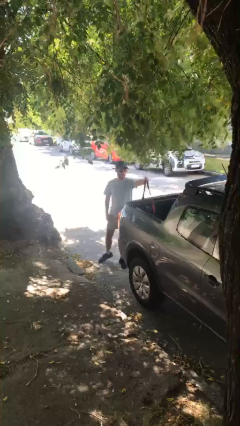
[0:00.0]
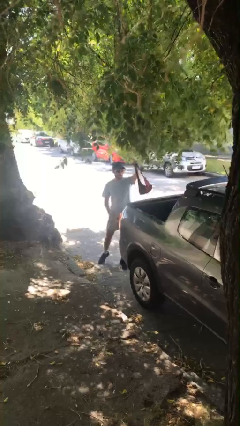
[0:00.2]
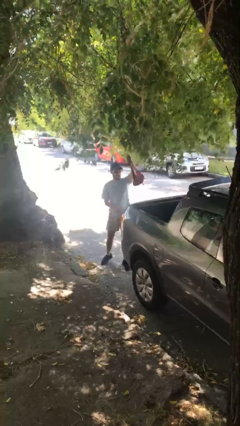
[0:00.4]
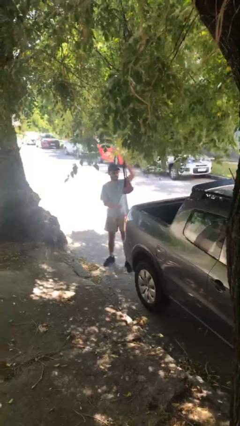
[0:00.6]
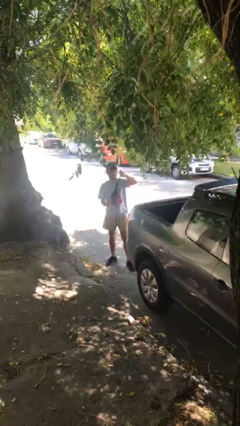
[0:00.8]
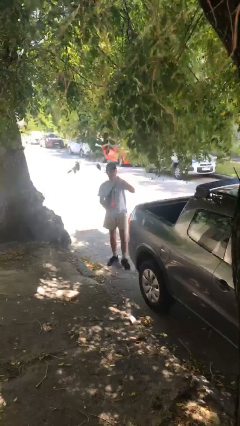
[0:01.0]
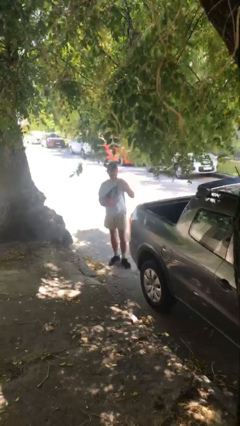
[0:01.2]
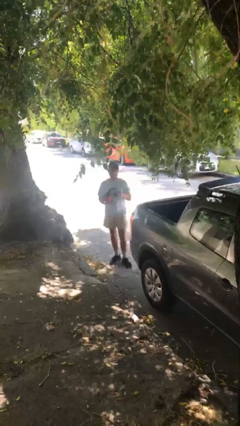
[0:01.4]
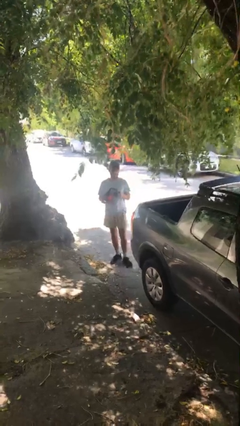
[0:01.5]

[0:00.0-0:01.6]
person unloads car

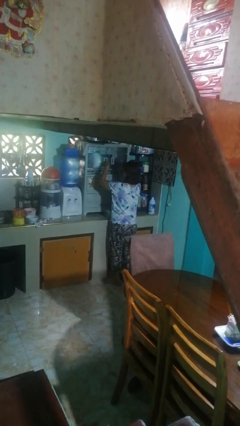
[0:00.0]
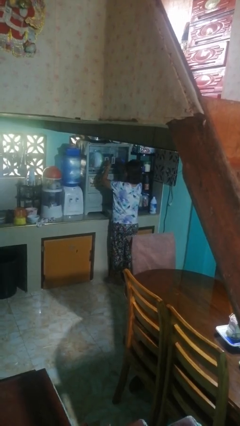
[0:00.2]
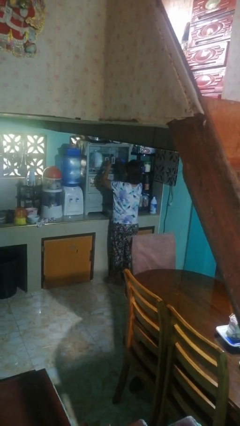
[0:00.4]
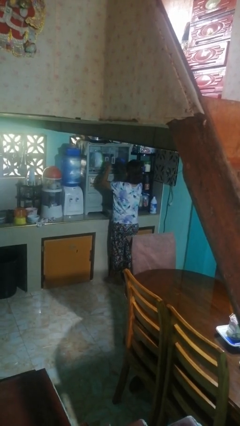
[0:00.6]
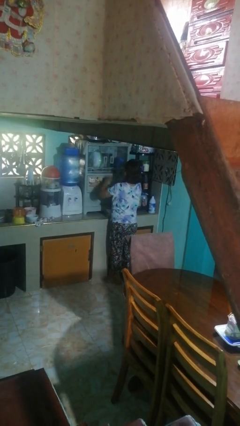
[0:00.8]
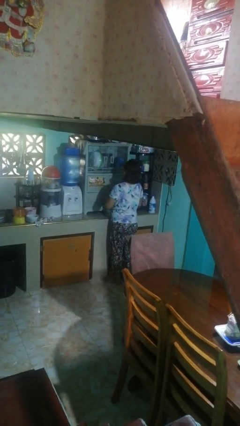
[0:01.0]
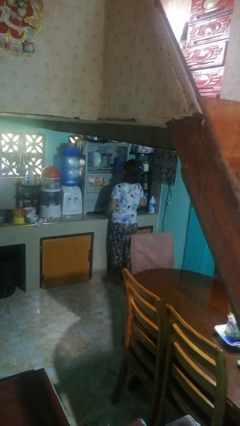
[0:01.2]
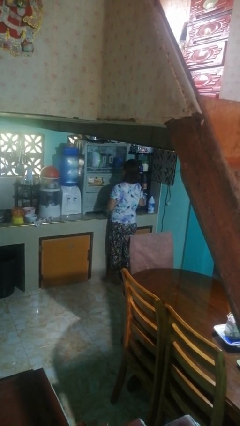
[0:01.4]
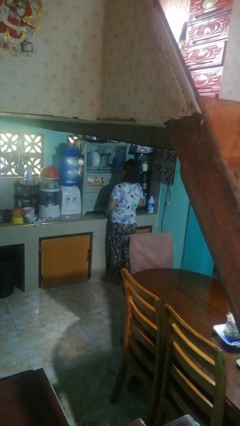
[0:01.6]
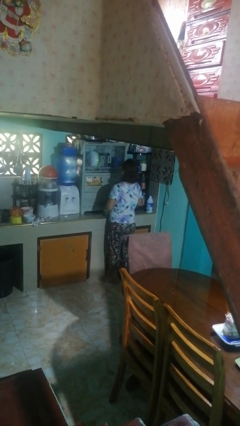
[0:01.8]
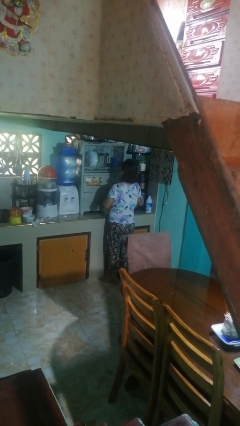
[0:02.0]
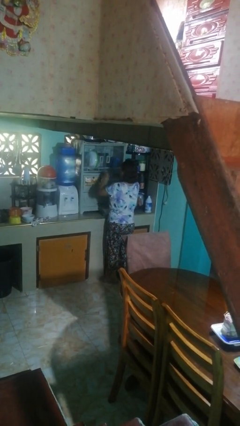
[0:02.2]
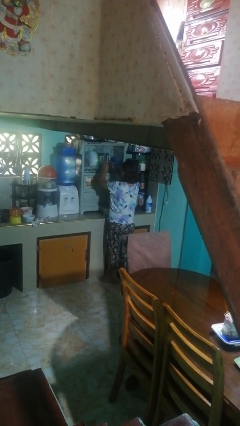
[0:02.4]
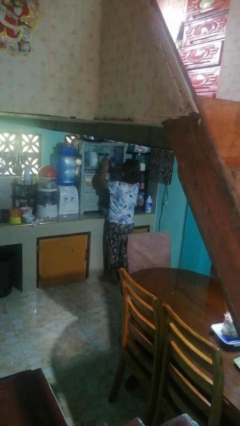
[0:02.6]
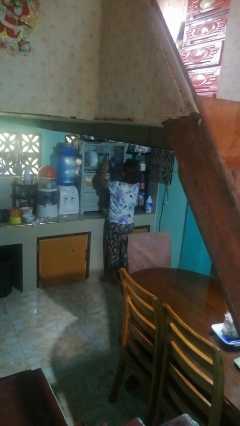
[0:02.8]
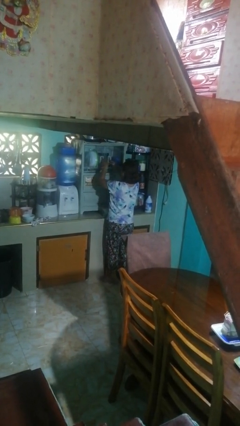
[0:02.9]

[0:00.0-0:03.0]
person opens curtains

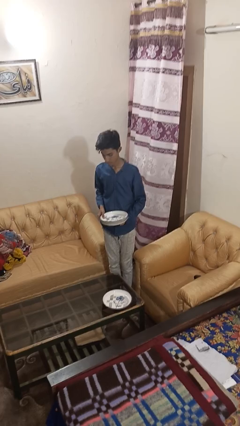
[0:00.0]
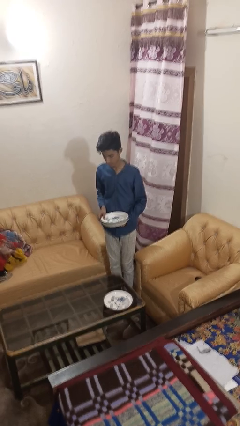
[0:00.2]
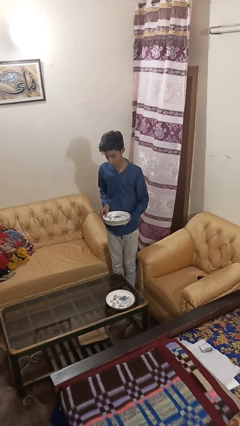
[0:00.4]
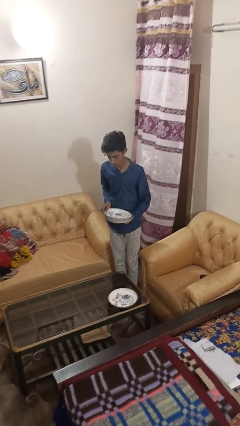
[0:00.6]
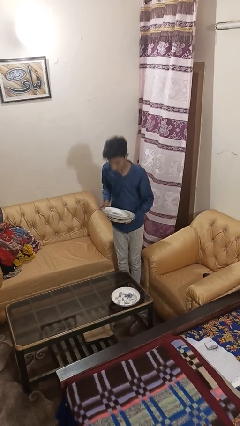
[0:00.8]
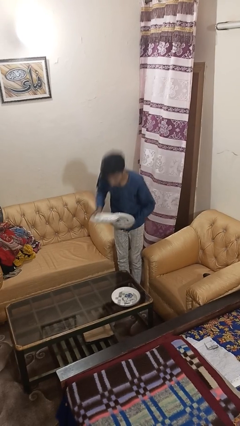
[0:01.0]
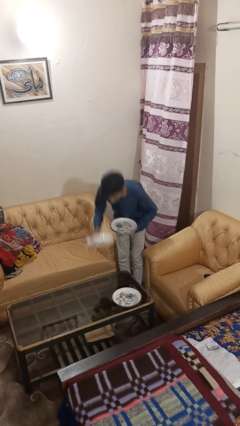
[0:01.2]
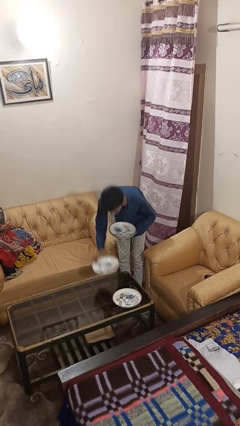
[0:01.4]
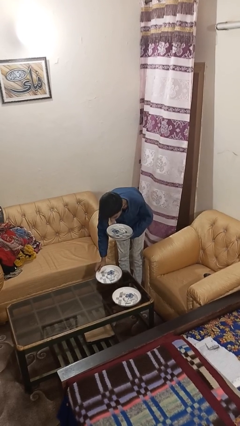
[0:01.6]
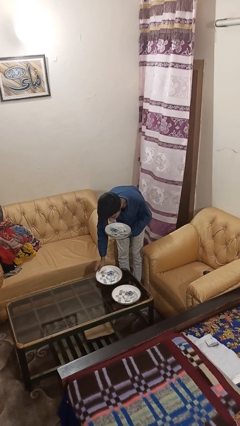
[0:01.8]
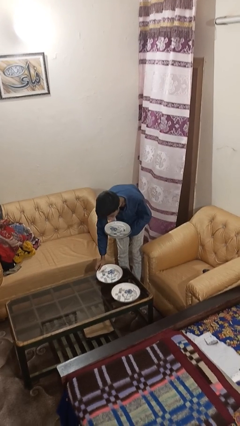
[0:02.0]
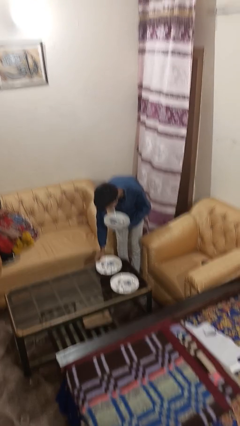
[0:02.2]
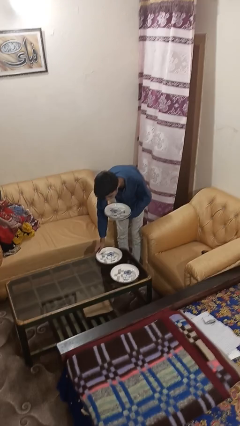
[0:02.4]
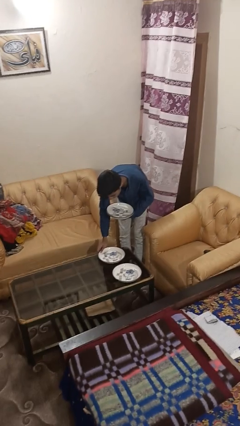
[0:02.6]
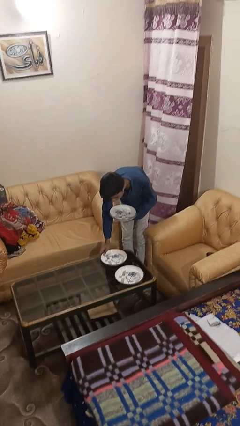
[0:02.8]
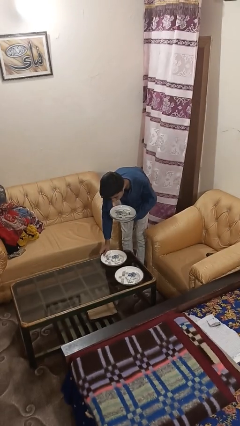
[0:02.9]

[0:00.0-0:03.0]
person sets table

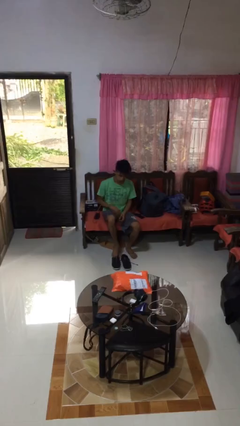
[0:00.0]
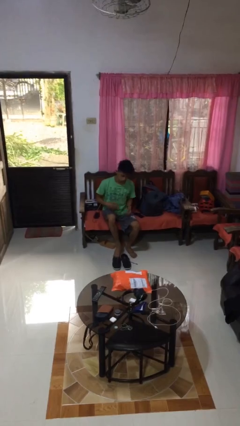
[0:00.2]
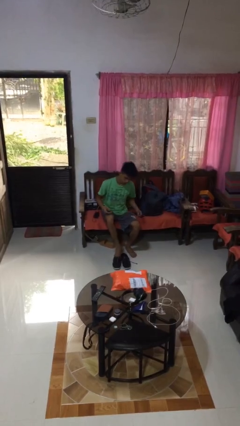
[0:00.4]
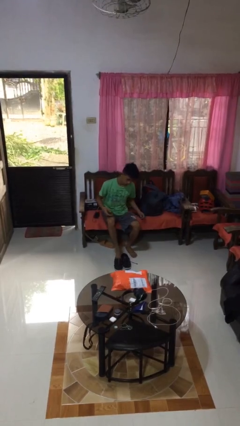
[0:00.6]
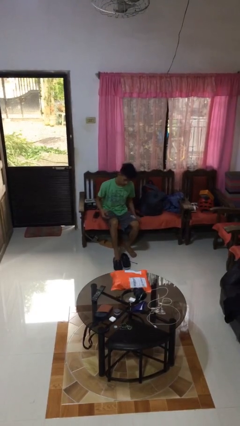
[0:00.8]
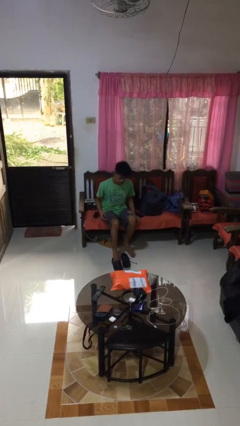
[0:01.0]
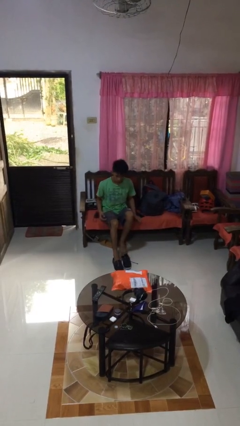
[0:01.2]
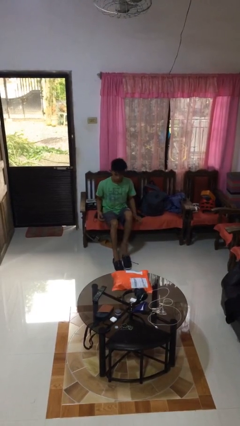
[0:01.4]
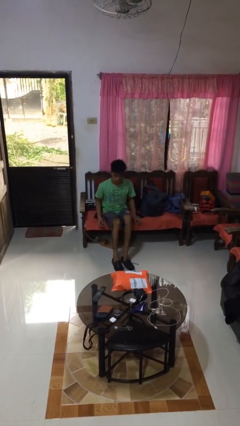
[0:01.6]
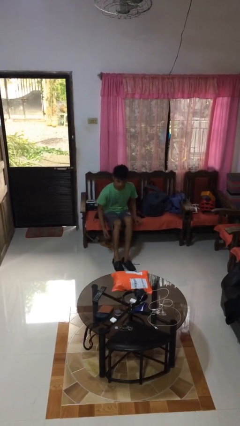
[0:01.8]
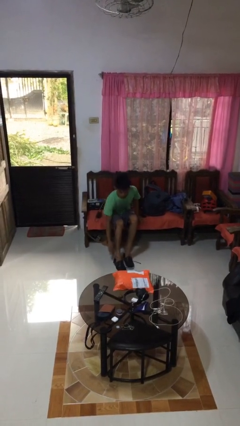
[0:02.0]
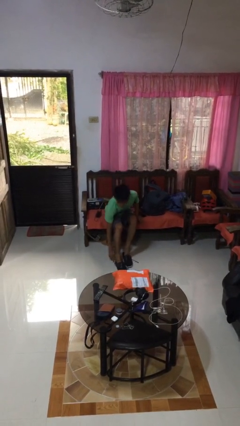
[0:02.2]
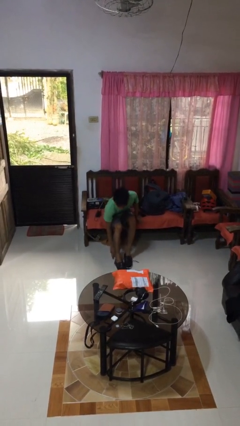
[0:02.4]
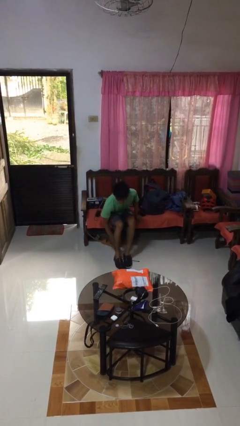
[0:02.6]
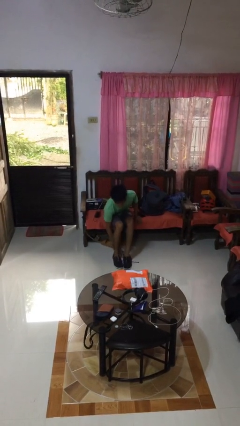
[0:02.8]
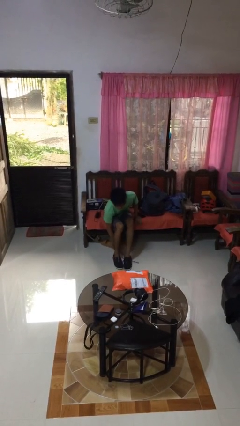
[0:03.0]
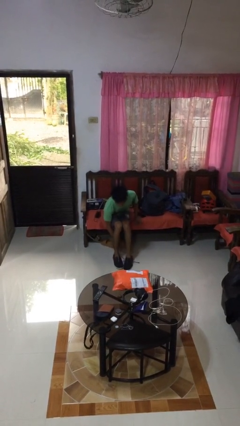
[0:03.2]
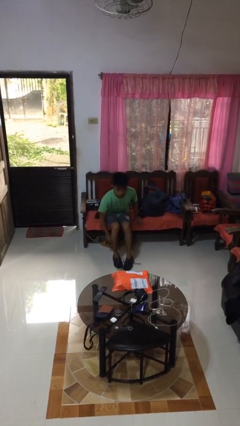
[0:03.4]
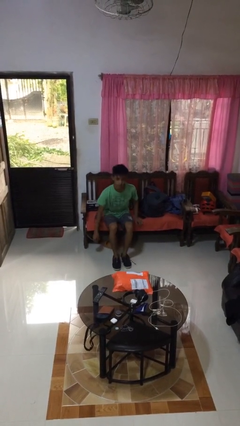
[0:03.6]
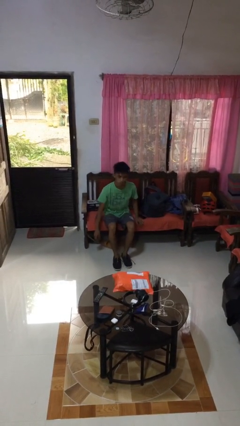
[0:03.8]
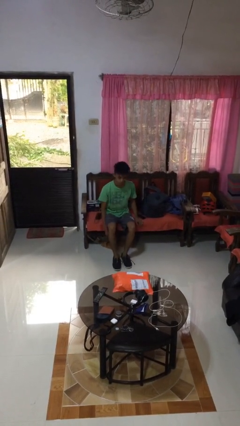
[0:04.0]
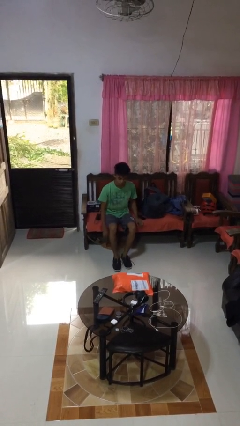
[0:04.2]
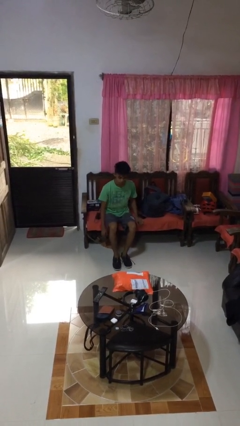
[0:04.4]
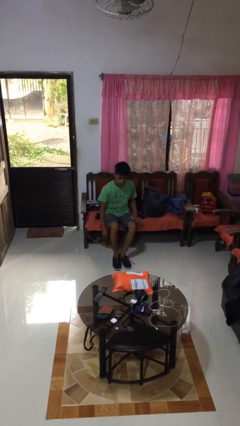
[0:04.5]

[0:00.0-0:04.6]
person puts on shoes

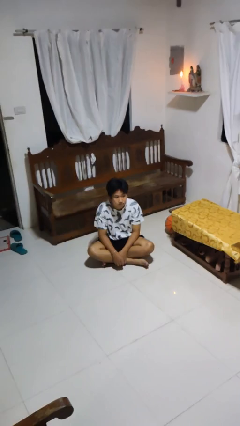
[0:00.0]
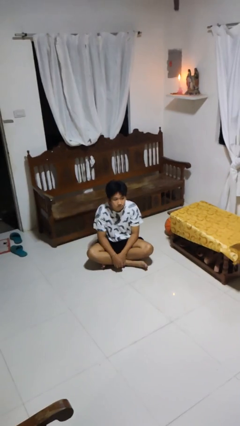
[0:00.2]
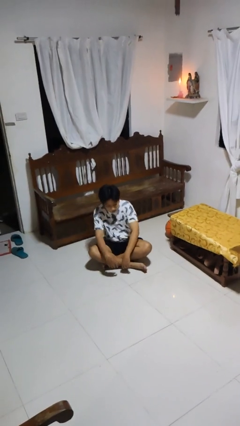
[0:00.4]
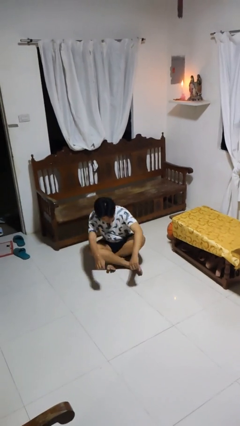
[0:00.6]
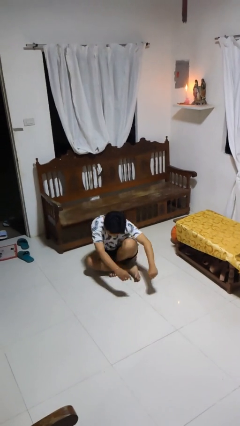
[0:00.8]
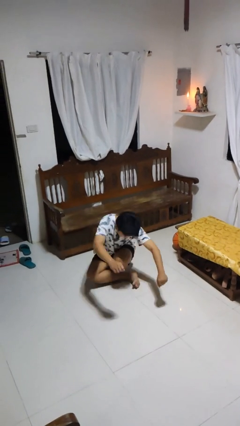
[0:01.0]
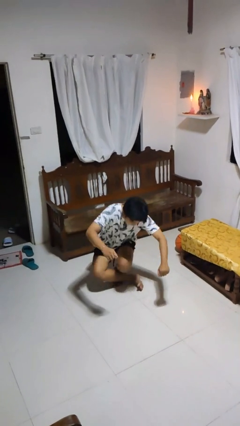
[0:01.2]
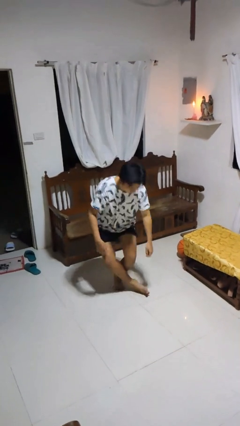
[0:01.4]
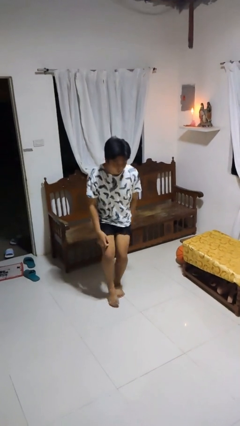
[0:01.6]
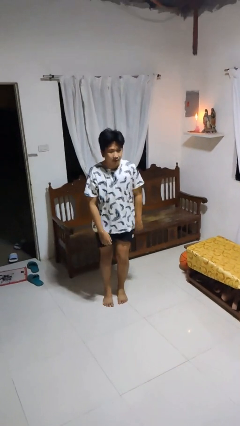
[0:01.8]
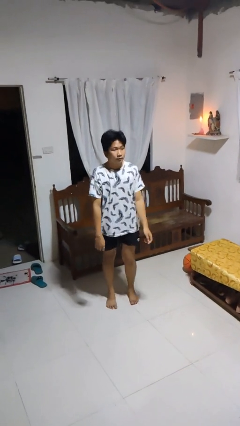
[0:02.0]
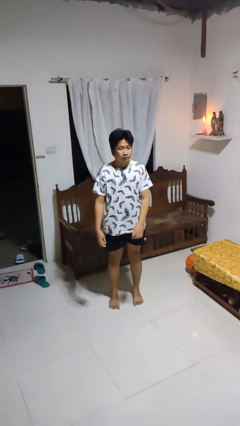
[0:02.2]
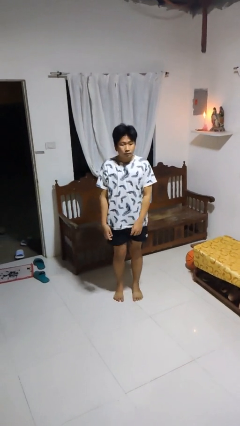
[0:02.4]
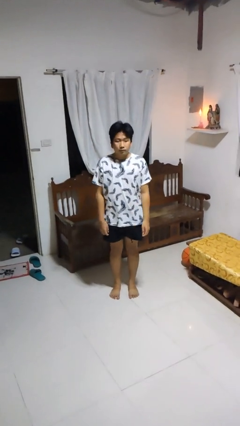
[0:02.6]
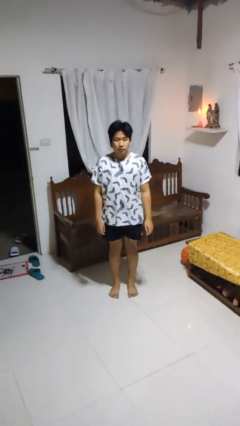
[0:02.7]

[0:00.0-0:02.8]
person stands up from floor

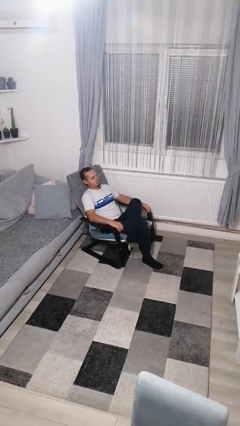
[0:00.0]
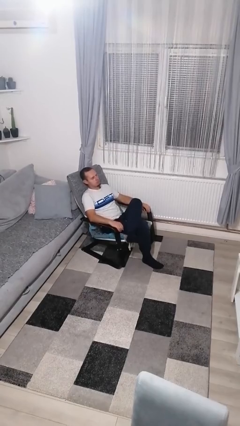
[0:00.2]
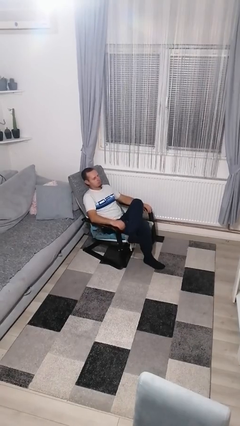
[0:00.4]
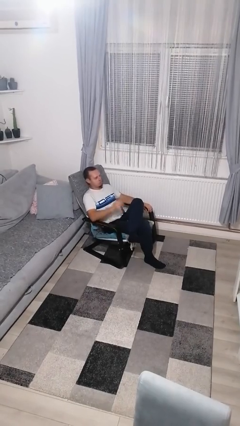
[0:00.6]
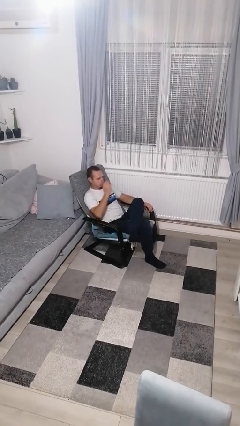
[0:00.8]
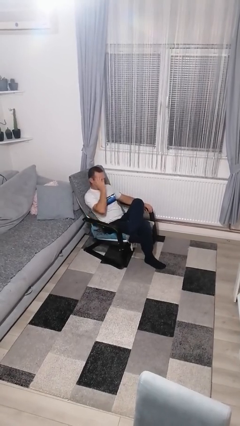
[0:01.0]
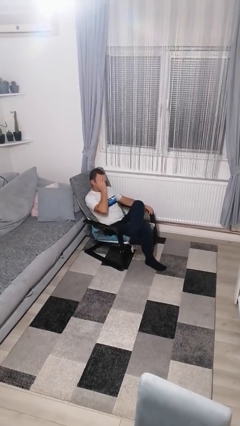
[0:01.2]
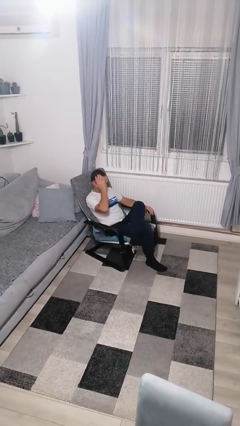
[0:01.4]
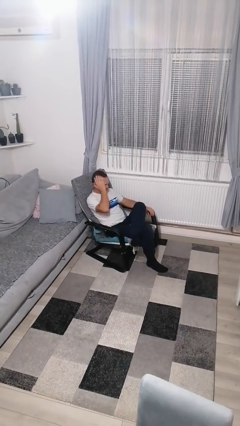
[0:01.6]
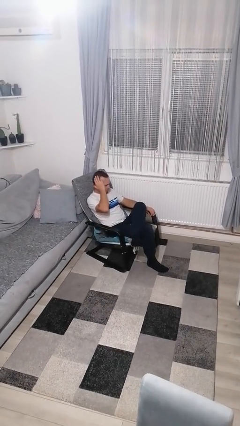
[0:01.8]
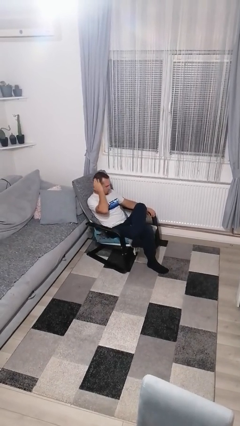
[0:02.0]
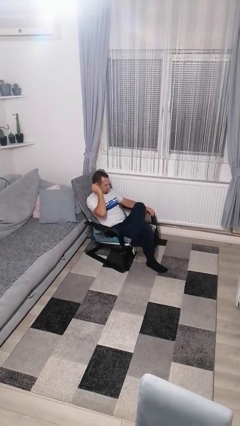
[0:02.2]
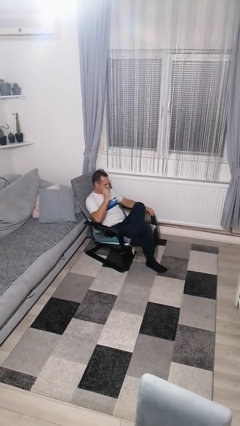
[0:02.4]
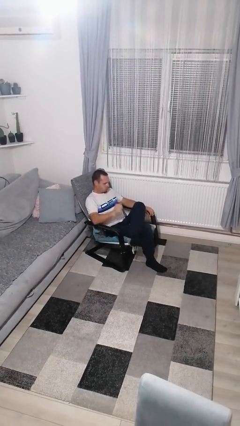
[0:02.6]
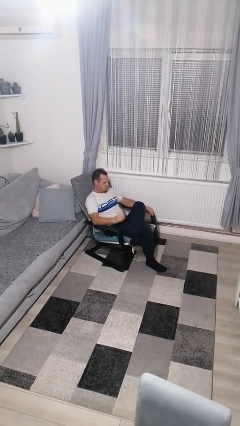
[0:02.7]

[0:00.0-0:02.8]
person strokes hair
